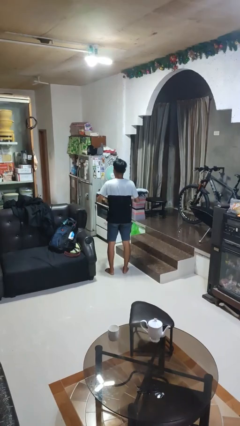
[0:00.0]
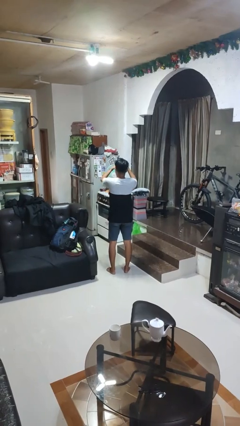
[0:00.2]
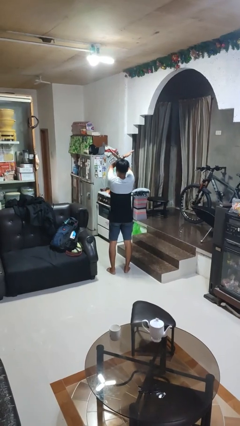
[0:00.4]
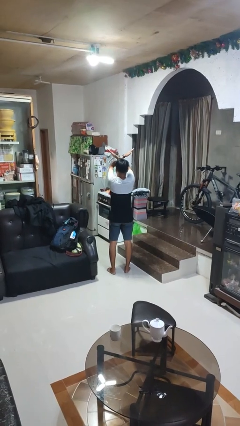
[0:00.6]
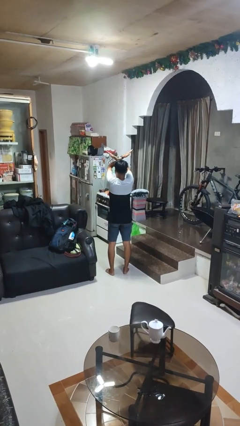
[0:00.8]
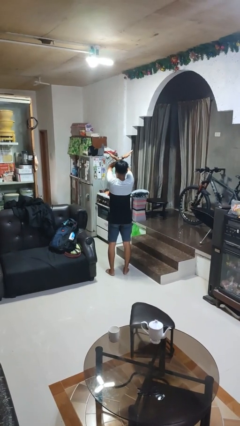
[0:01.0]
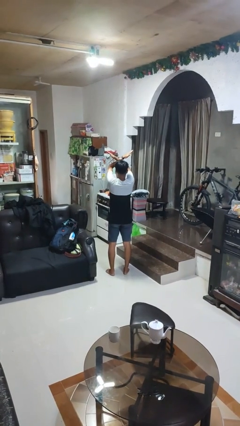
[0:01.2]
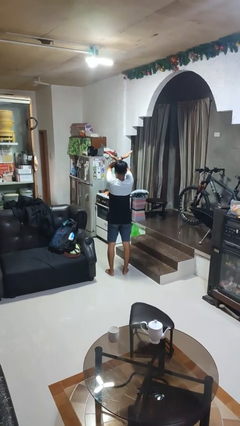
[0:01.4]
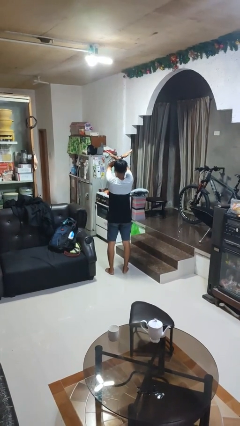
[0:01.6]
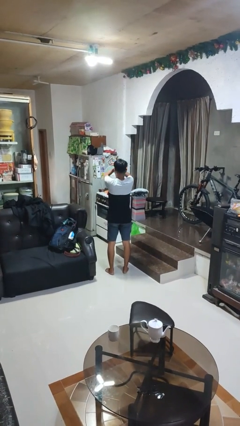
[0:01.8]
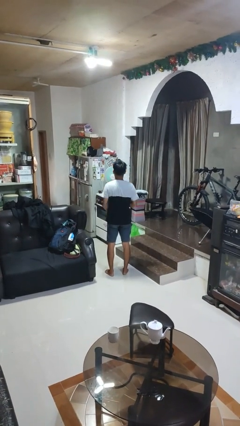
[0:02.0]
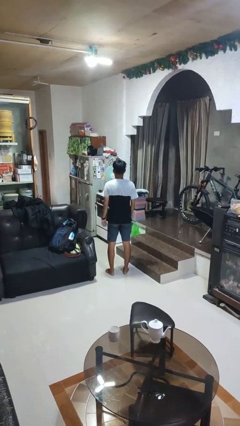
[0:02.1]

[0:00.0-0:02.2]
person gestures arms x

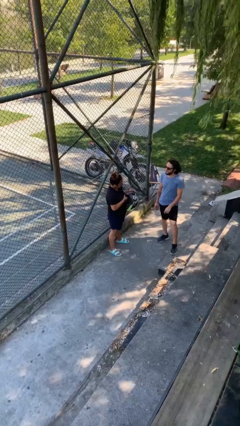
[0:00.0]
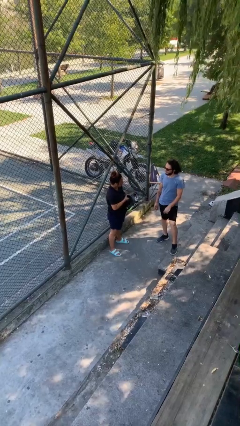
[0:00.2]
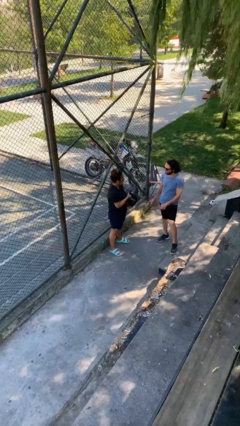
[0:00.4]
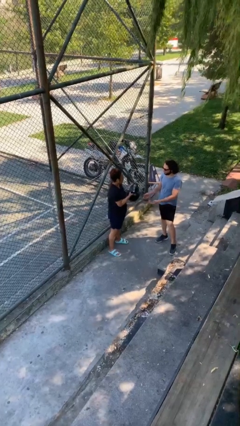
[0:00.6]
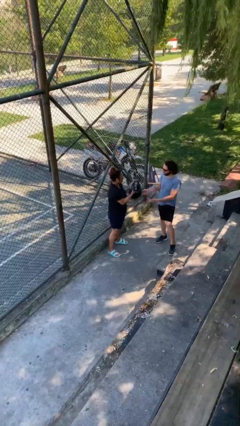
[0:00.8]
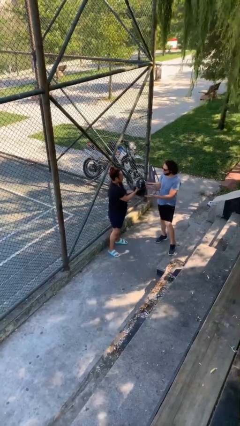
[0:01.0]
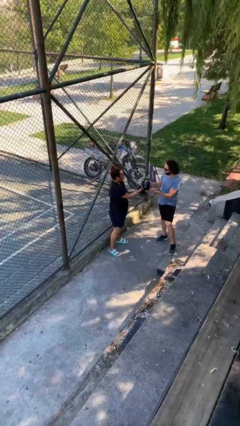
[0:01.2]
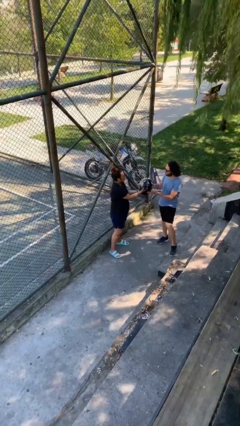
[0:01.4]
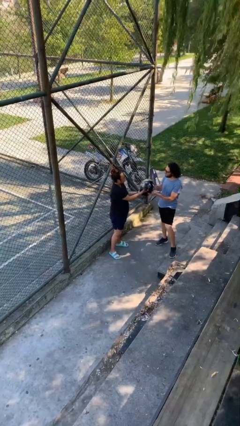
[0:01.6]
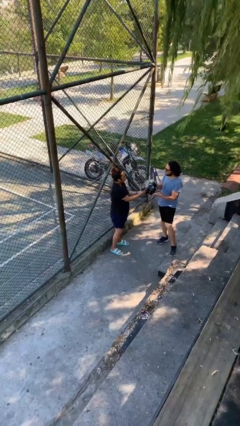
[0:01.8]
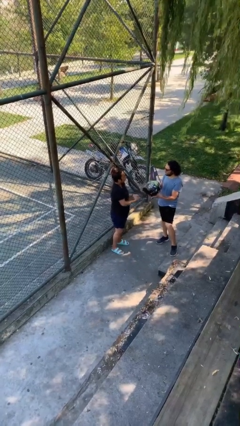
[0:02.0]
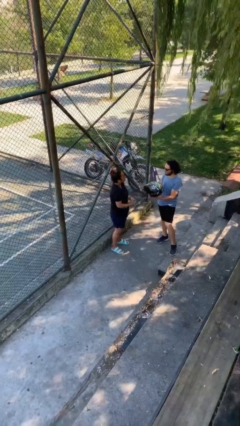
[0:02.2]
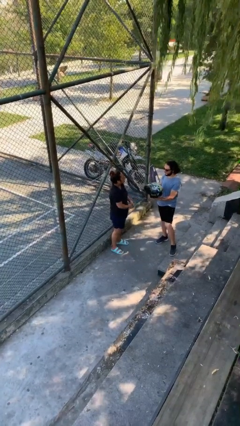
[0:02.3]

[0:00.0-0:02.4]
person transfers object to person

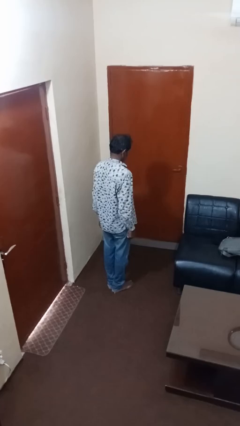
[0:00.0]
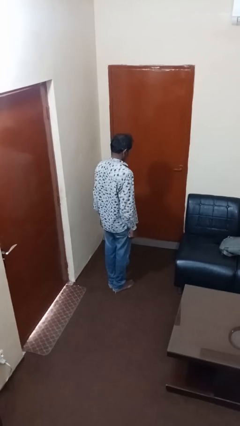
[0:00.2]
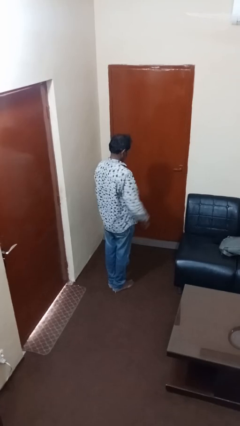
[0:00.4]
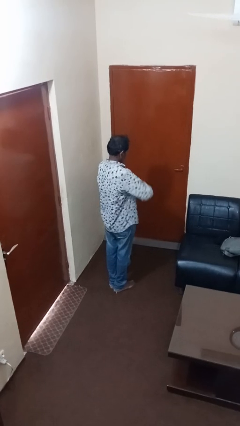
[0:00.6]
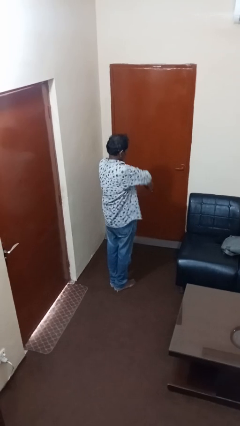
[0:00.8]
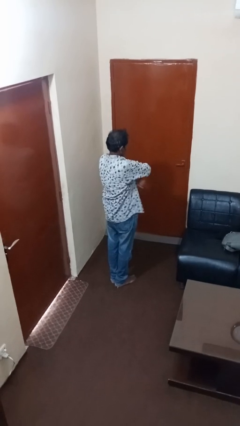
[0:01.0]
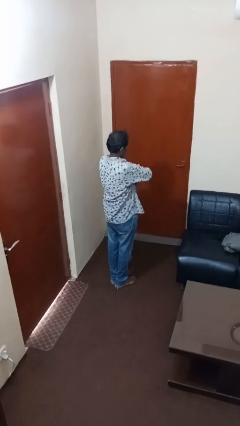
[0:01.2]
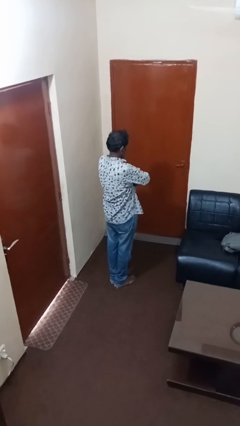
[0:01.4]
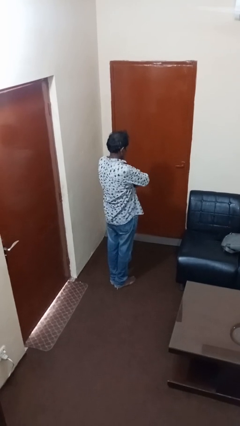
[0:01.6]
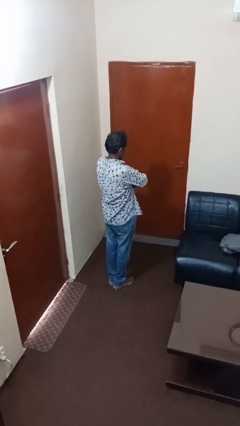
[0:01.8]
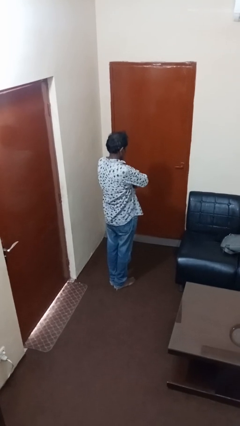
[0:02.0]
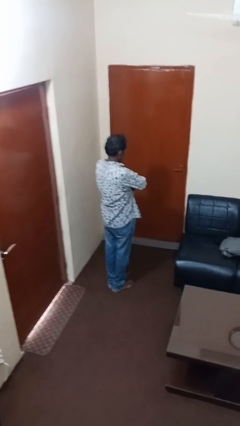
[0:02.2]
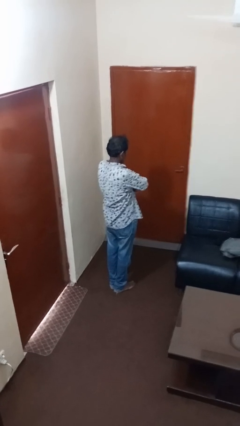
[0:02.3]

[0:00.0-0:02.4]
person crosses arms

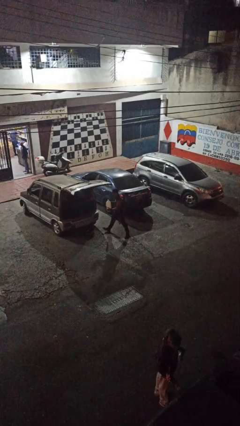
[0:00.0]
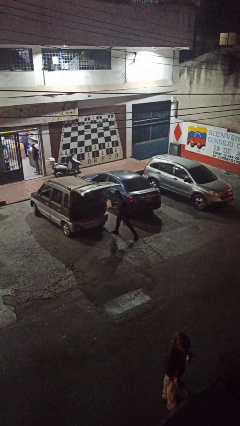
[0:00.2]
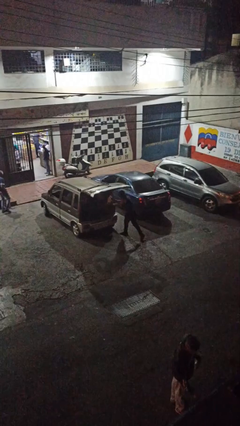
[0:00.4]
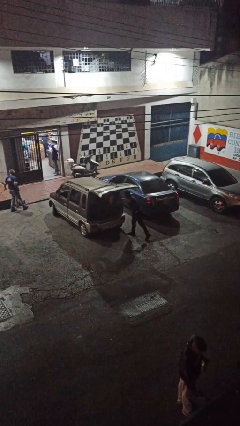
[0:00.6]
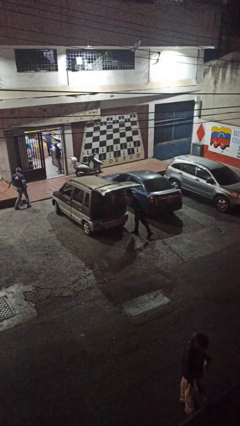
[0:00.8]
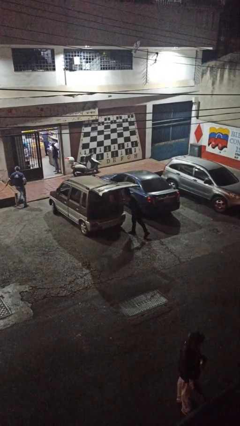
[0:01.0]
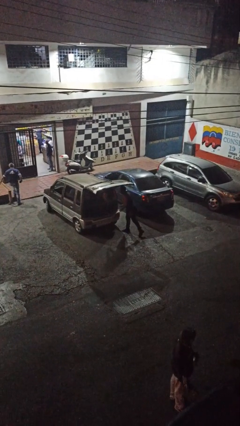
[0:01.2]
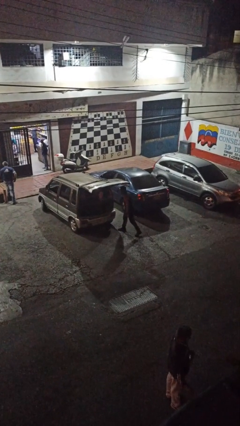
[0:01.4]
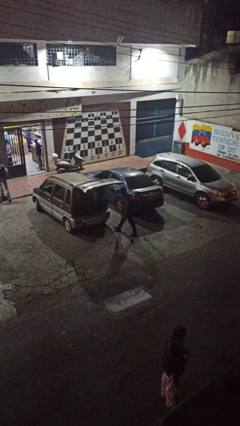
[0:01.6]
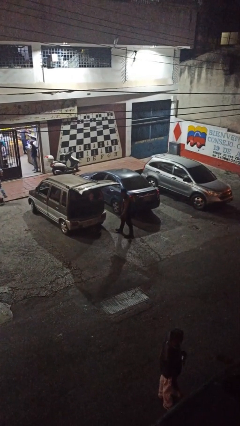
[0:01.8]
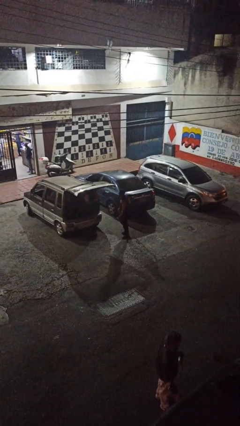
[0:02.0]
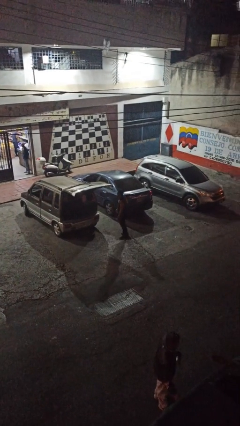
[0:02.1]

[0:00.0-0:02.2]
person loads car

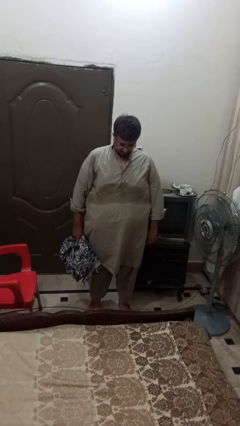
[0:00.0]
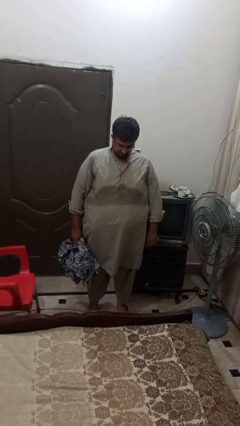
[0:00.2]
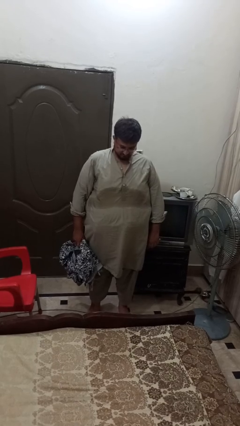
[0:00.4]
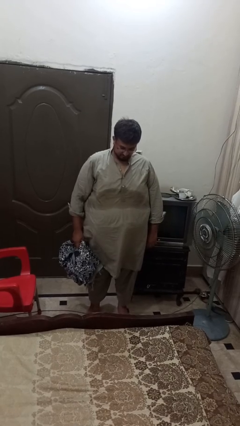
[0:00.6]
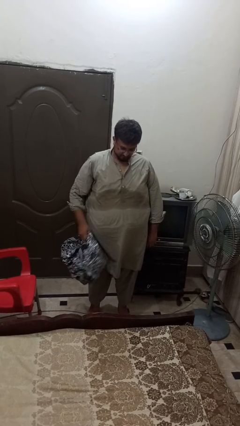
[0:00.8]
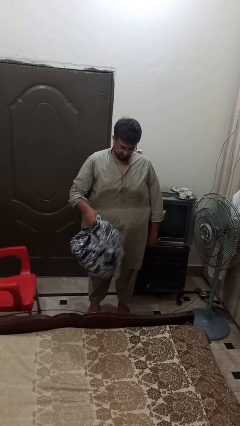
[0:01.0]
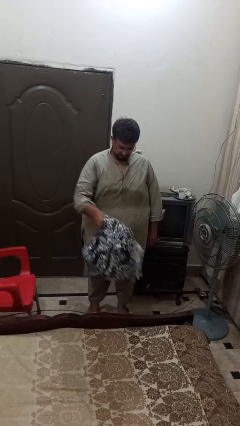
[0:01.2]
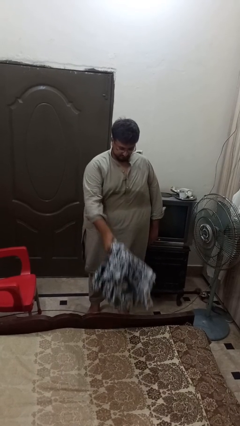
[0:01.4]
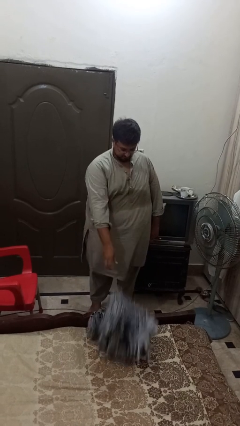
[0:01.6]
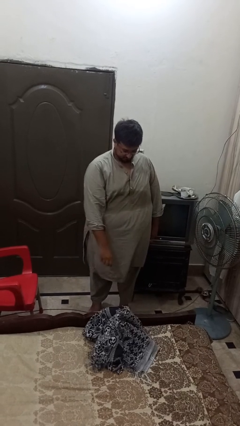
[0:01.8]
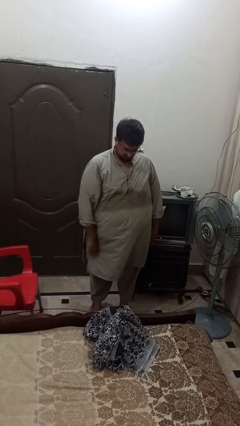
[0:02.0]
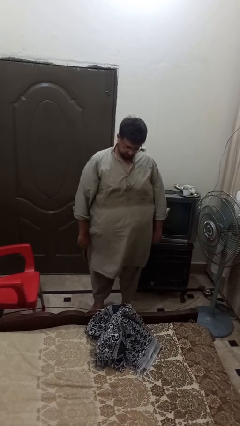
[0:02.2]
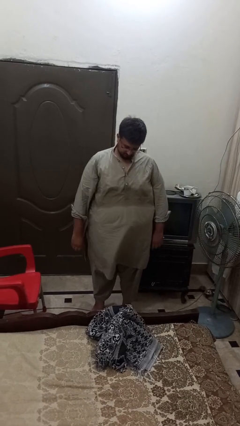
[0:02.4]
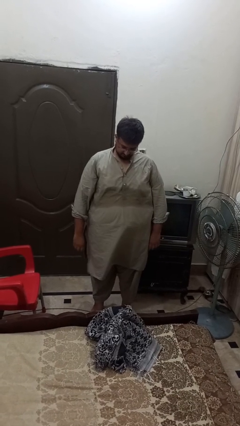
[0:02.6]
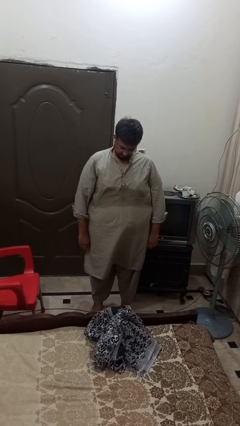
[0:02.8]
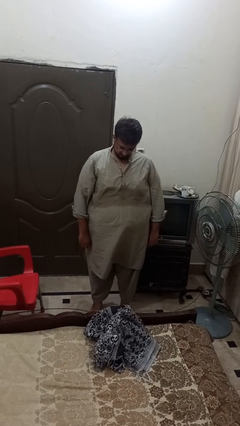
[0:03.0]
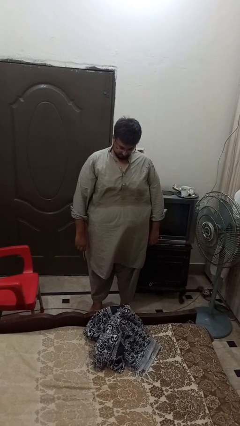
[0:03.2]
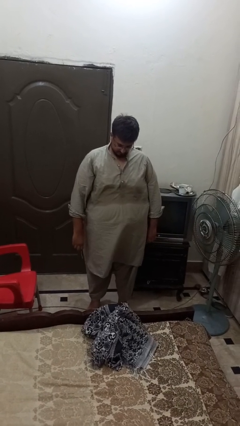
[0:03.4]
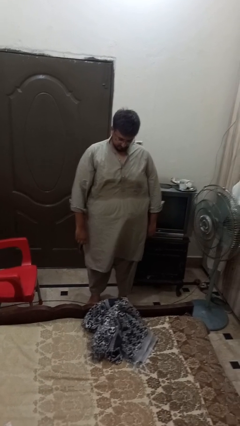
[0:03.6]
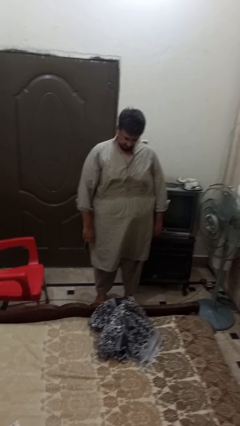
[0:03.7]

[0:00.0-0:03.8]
person puts down object on bed

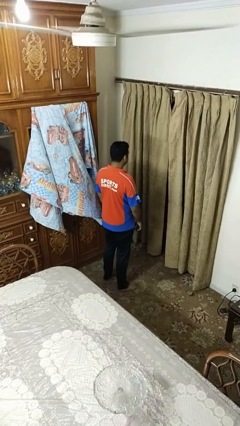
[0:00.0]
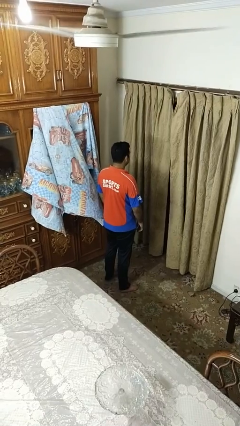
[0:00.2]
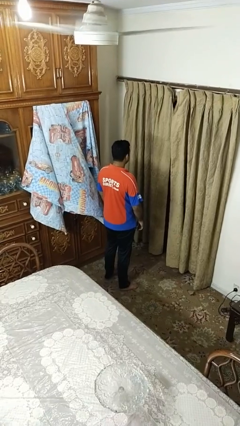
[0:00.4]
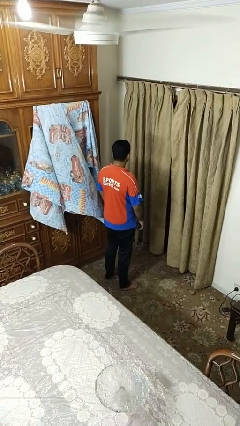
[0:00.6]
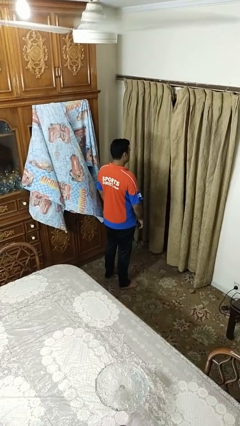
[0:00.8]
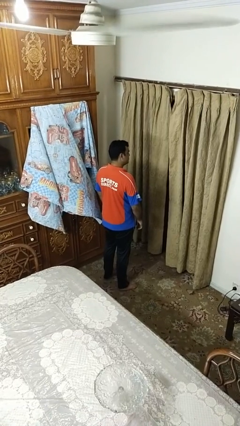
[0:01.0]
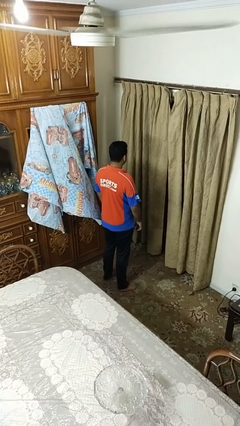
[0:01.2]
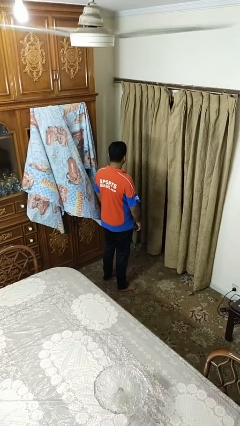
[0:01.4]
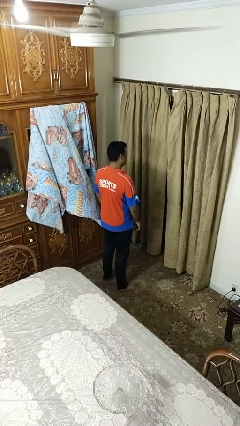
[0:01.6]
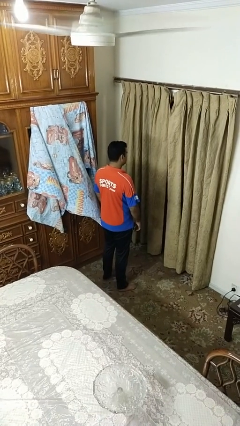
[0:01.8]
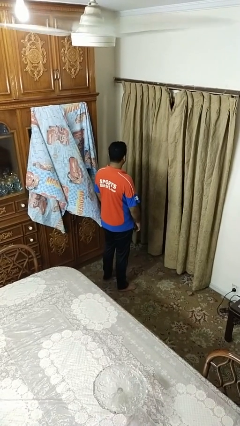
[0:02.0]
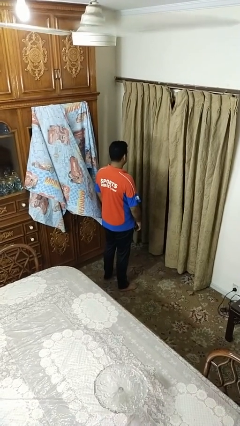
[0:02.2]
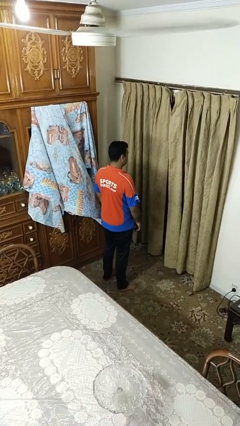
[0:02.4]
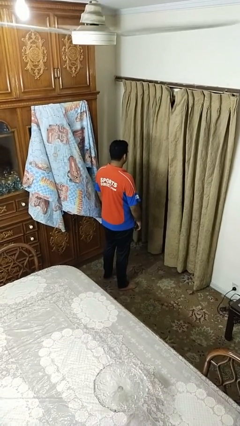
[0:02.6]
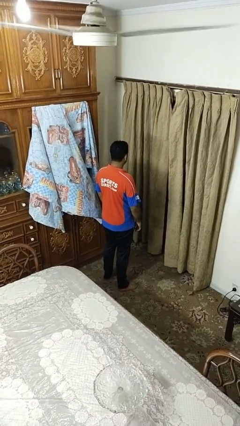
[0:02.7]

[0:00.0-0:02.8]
person shakes head

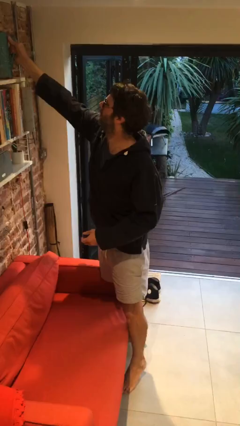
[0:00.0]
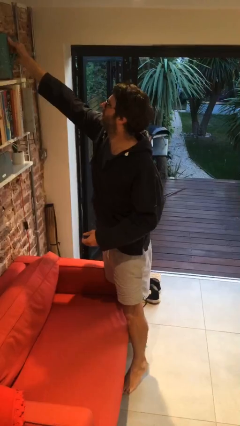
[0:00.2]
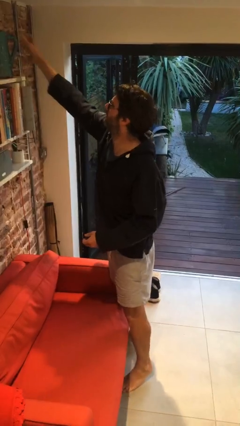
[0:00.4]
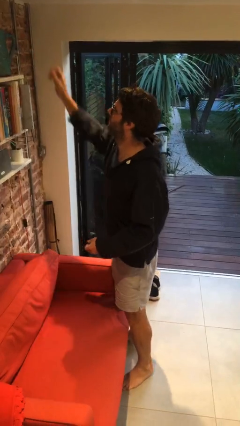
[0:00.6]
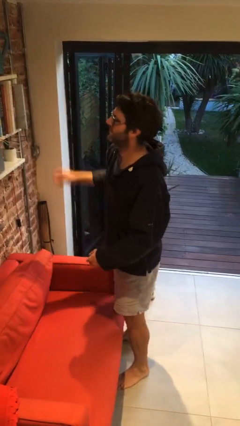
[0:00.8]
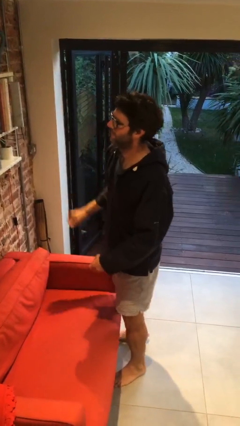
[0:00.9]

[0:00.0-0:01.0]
person puts down object on shelf
